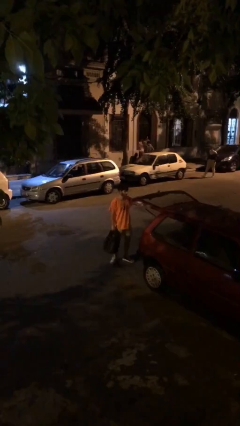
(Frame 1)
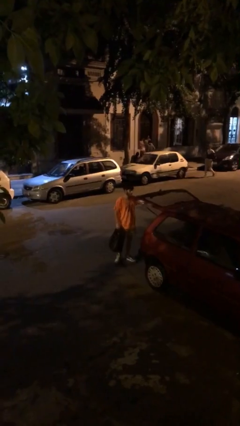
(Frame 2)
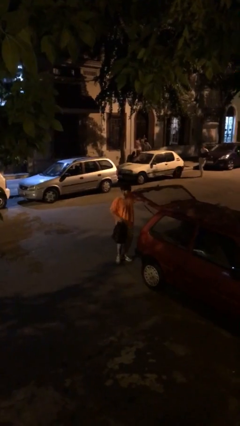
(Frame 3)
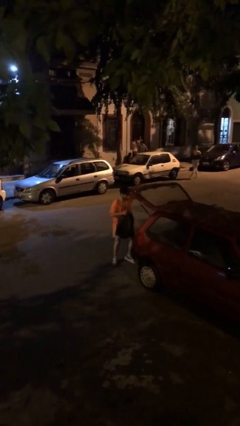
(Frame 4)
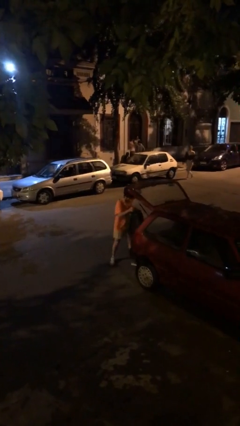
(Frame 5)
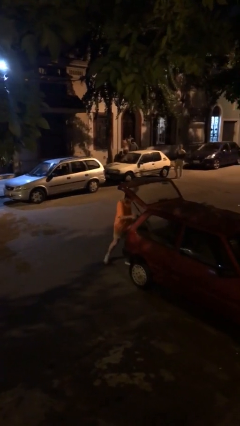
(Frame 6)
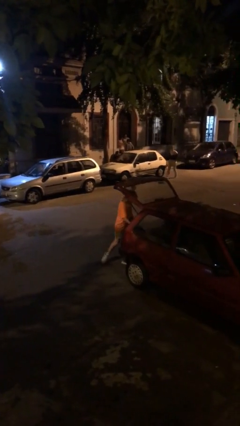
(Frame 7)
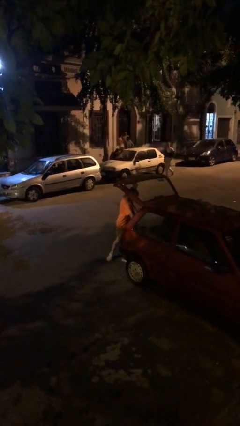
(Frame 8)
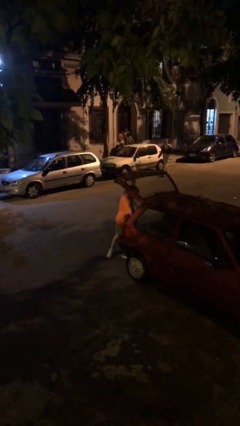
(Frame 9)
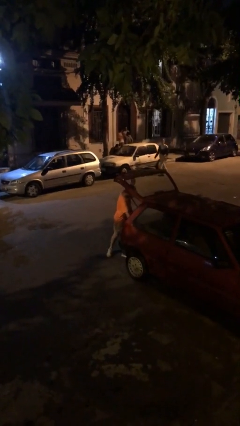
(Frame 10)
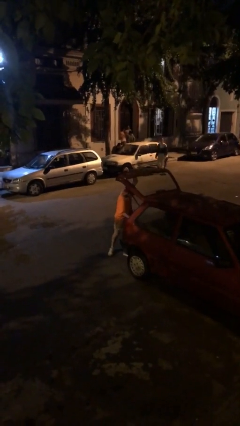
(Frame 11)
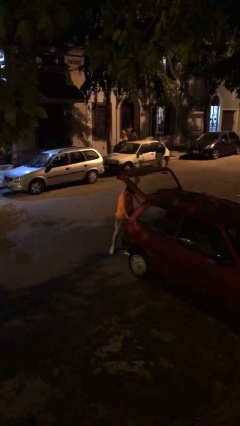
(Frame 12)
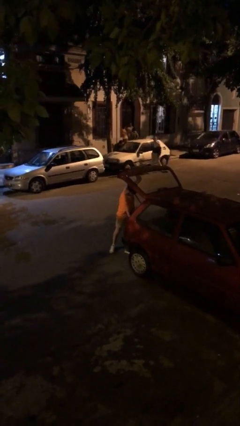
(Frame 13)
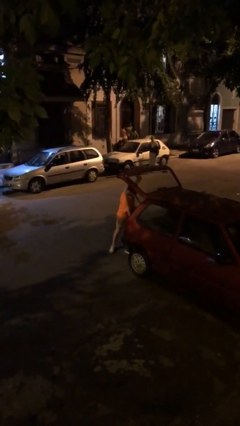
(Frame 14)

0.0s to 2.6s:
person loads car

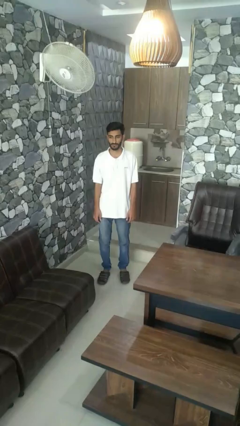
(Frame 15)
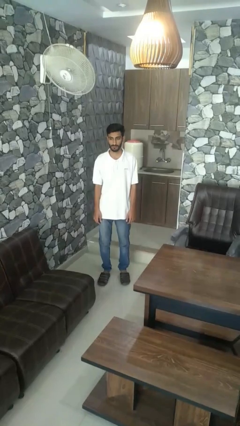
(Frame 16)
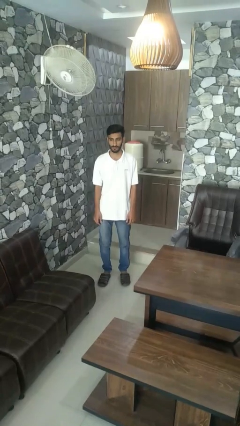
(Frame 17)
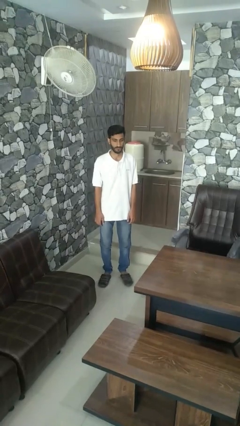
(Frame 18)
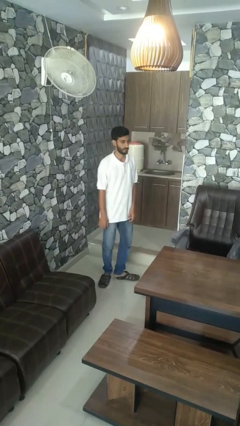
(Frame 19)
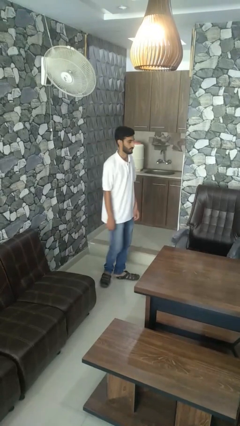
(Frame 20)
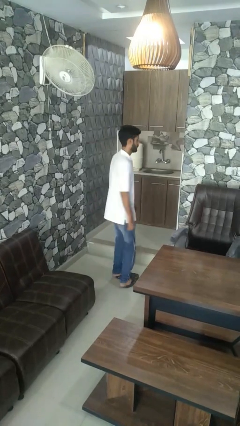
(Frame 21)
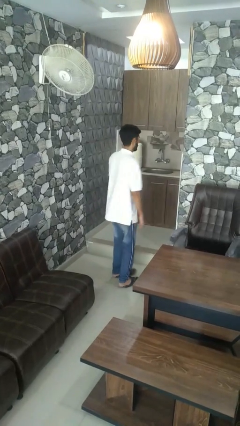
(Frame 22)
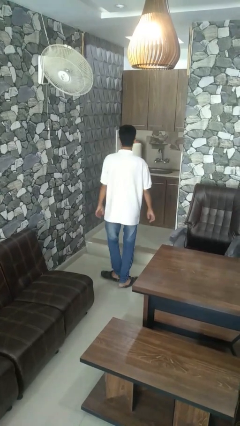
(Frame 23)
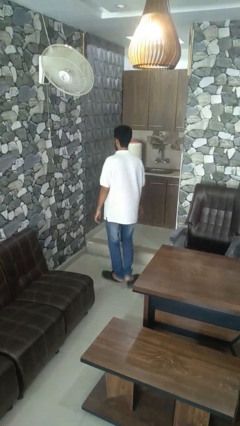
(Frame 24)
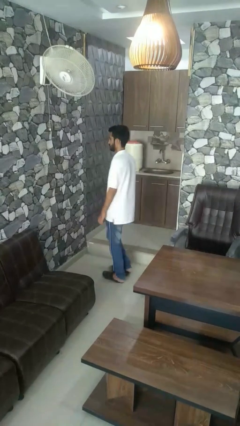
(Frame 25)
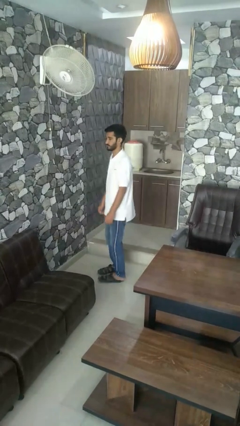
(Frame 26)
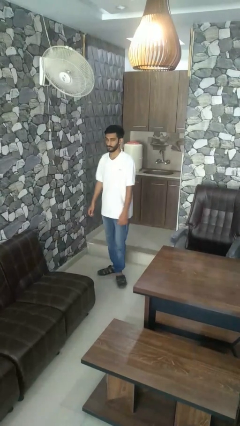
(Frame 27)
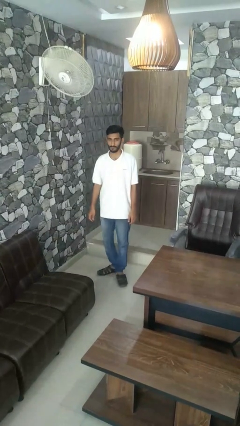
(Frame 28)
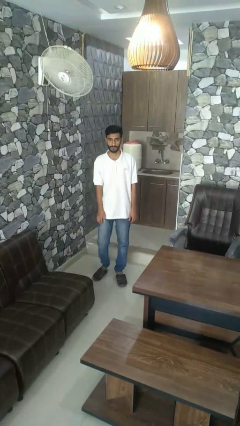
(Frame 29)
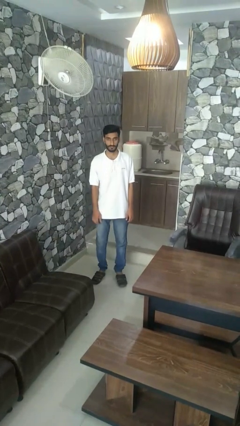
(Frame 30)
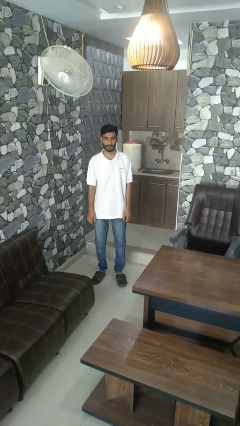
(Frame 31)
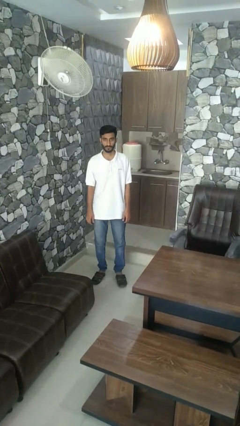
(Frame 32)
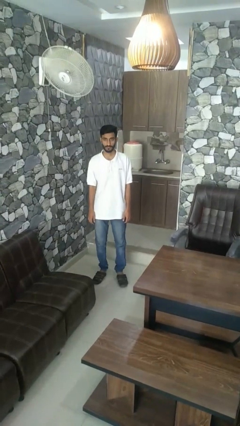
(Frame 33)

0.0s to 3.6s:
person twirls

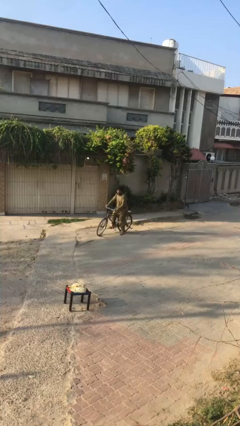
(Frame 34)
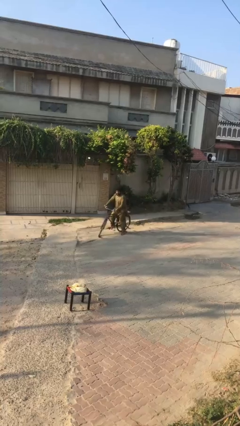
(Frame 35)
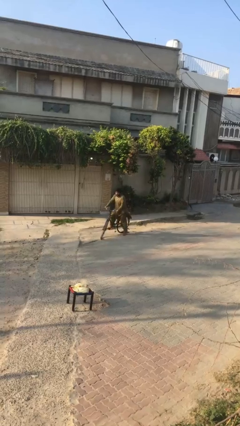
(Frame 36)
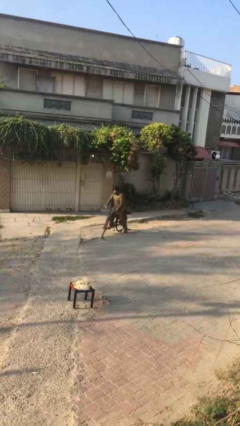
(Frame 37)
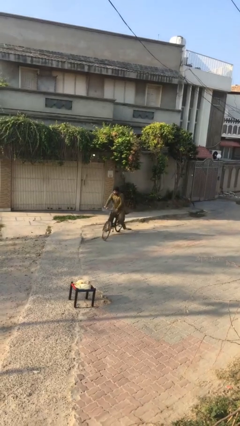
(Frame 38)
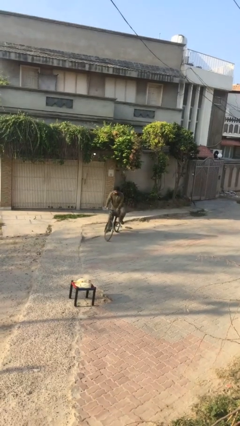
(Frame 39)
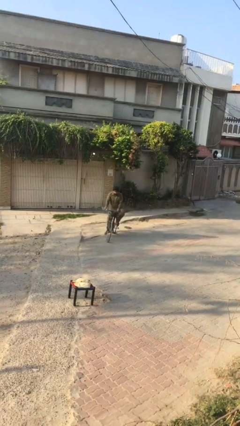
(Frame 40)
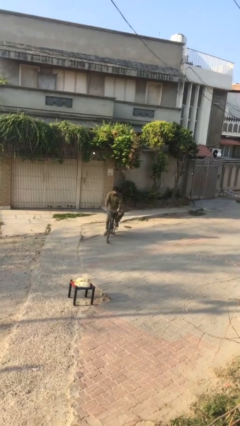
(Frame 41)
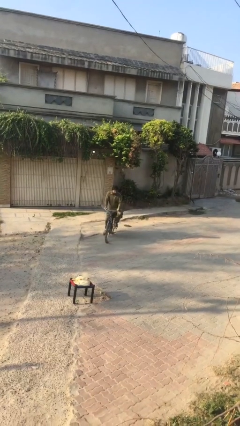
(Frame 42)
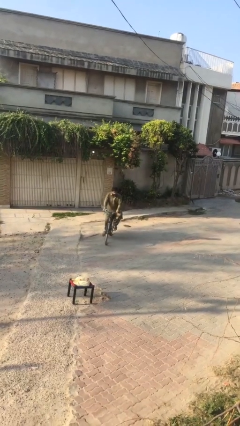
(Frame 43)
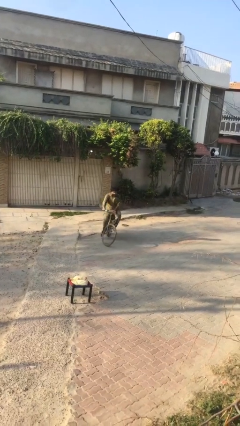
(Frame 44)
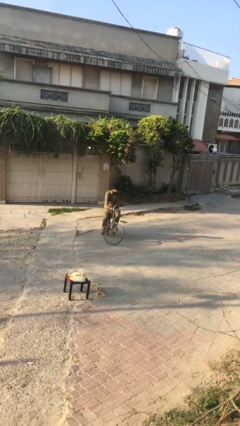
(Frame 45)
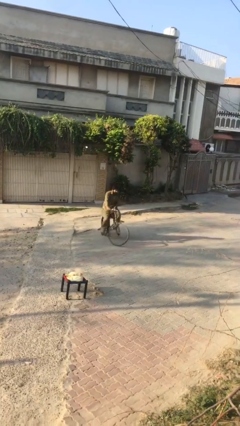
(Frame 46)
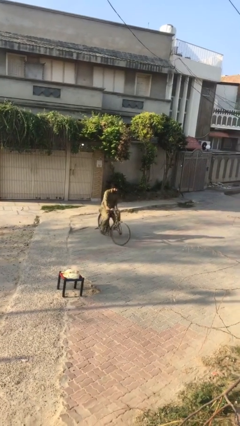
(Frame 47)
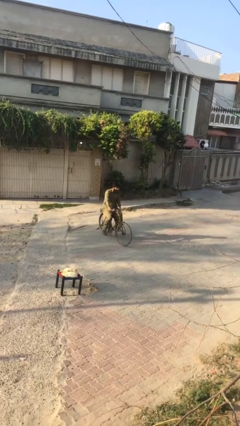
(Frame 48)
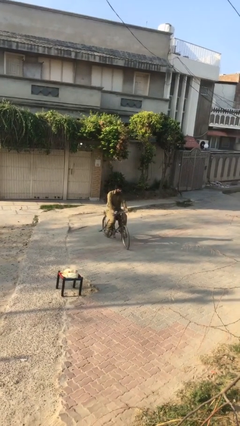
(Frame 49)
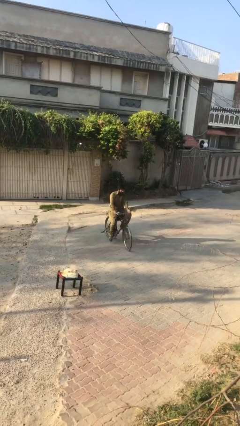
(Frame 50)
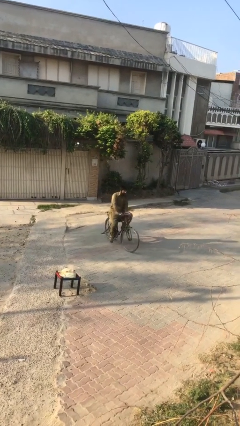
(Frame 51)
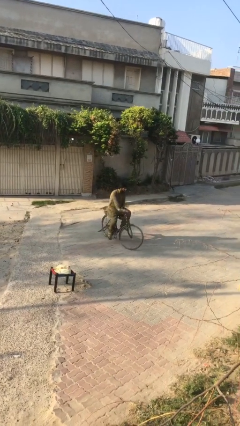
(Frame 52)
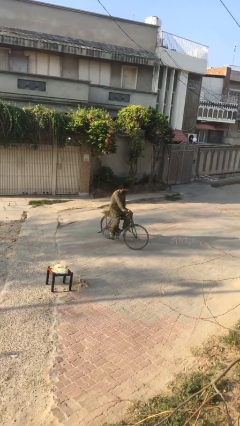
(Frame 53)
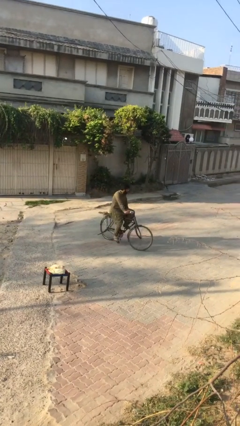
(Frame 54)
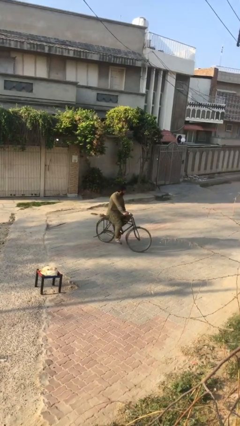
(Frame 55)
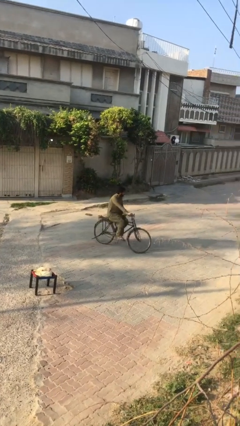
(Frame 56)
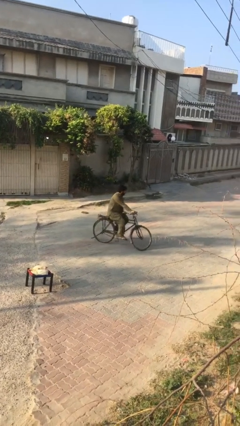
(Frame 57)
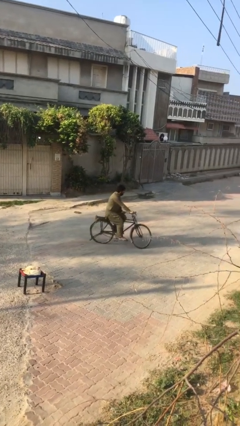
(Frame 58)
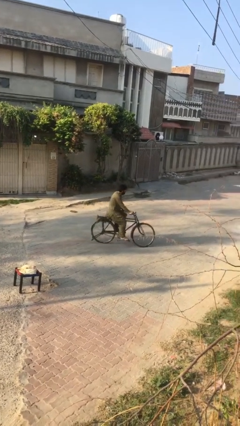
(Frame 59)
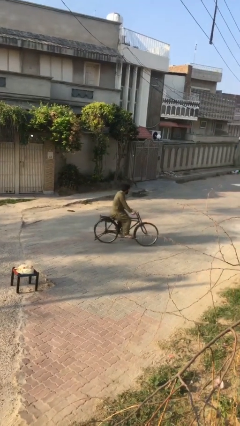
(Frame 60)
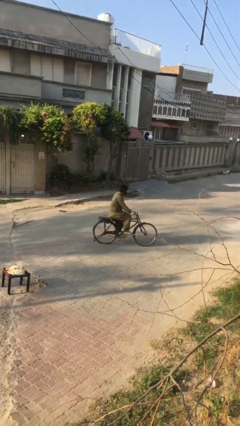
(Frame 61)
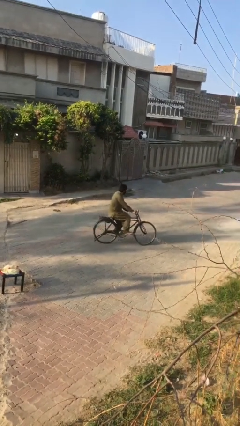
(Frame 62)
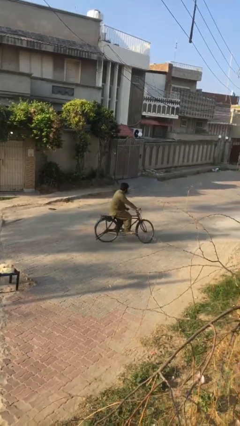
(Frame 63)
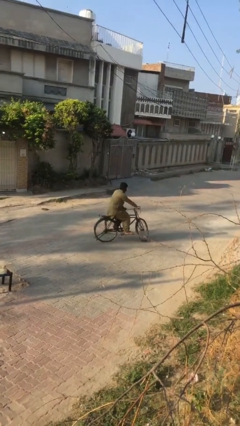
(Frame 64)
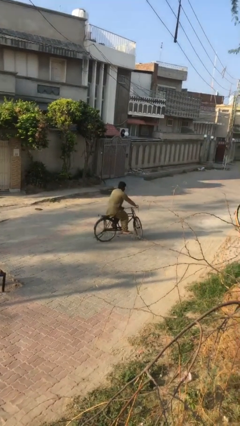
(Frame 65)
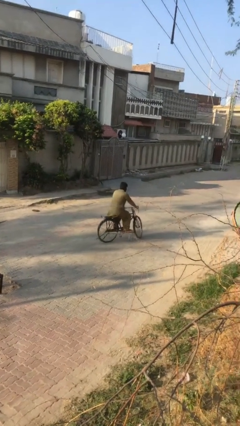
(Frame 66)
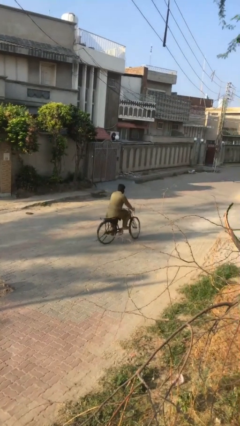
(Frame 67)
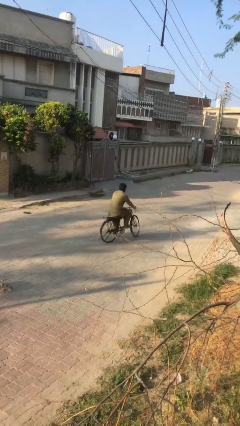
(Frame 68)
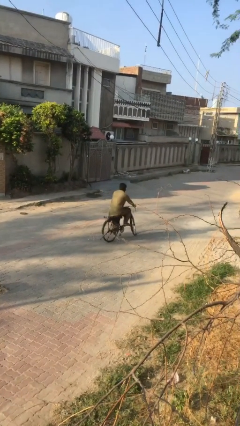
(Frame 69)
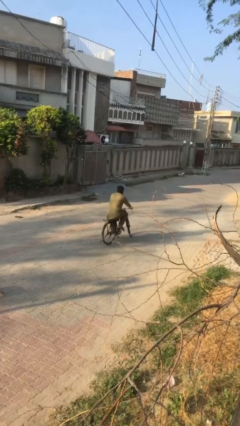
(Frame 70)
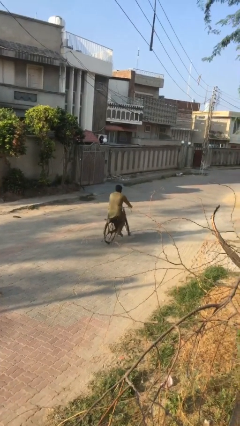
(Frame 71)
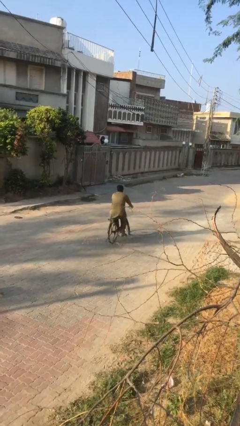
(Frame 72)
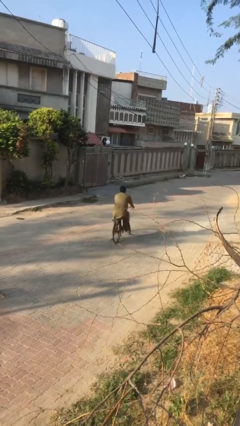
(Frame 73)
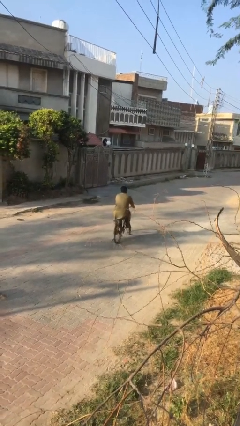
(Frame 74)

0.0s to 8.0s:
person rides bicycle

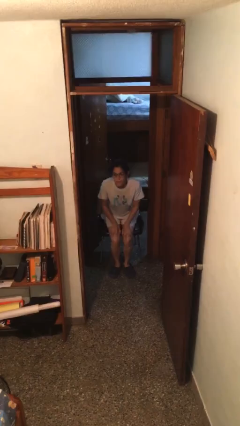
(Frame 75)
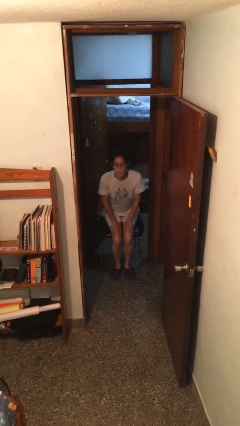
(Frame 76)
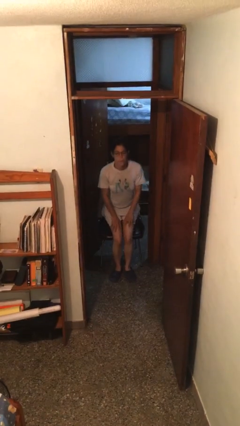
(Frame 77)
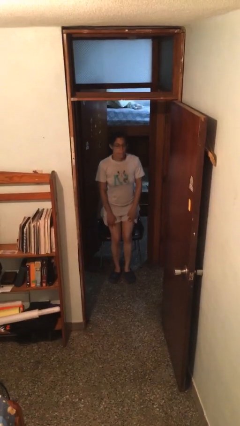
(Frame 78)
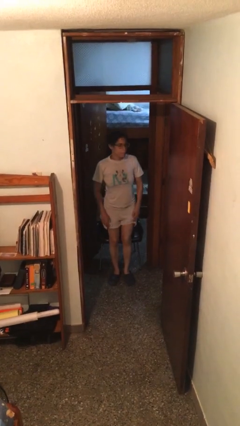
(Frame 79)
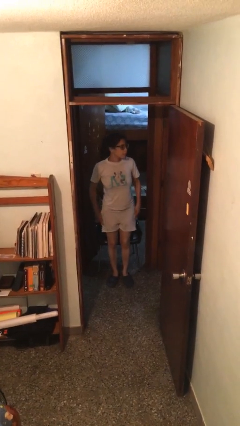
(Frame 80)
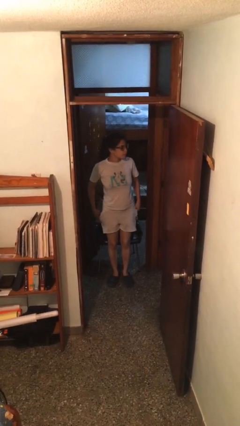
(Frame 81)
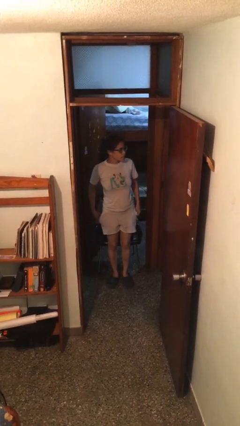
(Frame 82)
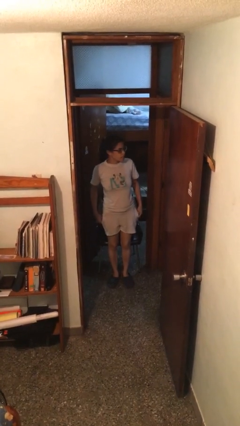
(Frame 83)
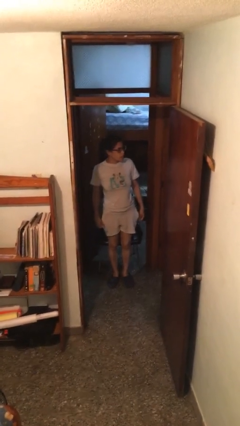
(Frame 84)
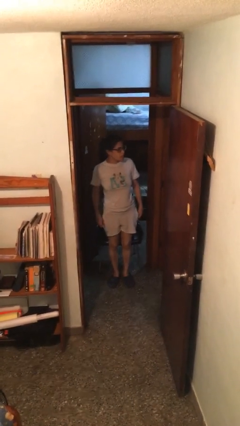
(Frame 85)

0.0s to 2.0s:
person stands up

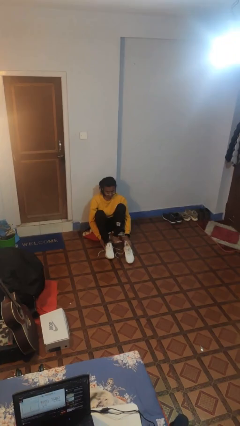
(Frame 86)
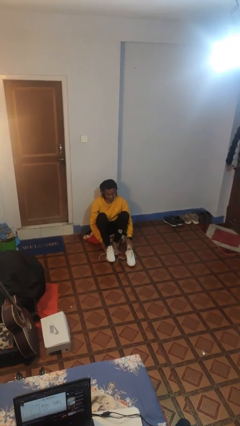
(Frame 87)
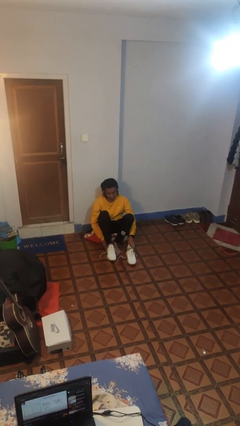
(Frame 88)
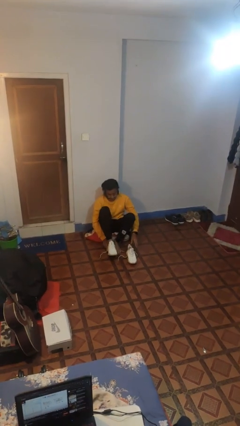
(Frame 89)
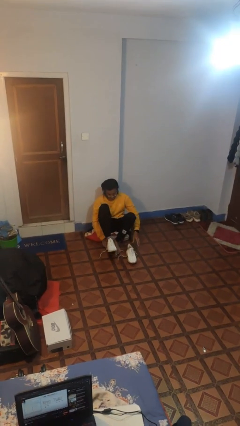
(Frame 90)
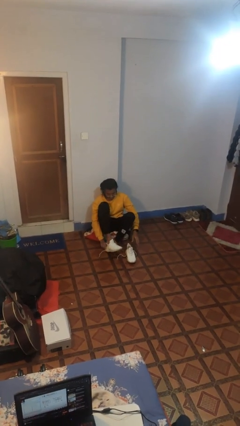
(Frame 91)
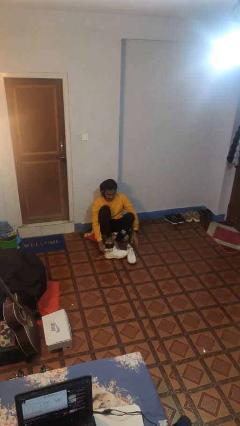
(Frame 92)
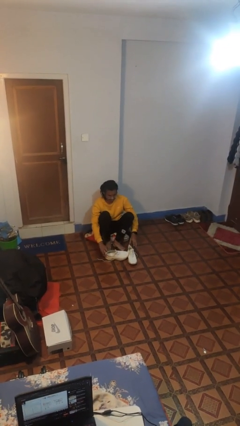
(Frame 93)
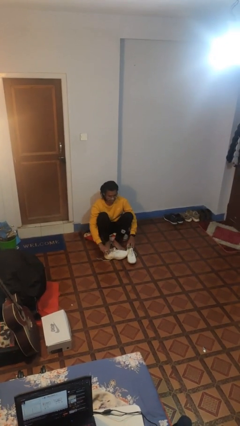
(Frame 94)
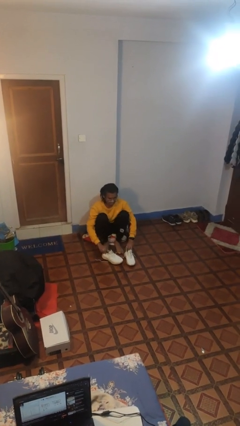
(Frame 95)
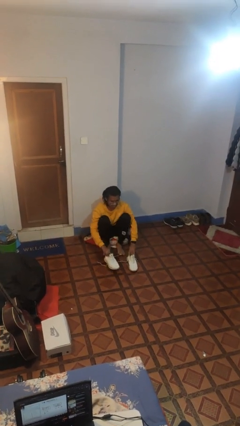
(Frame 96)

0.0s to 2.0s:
person takes off shoes
